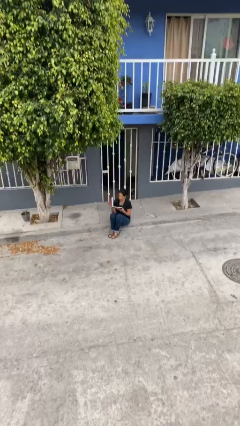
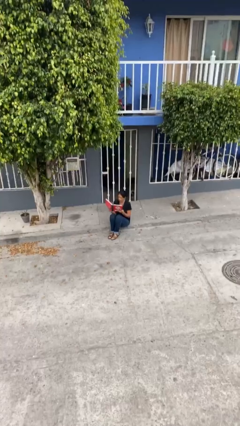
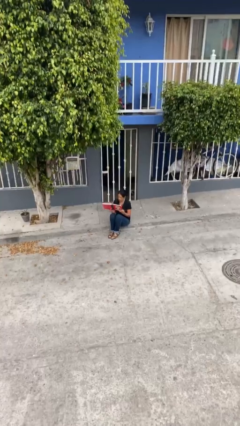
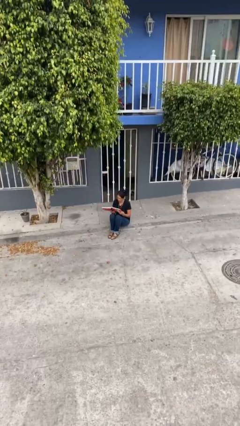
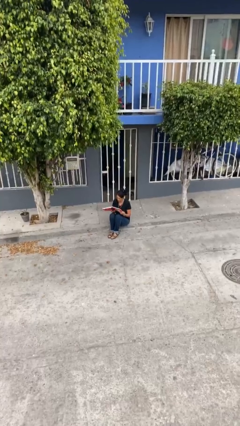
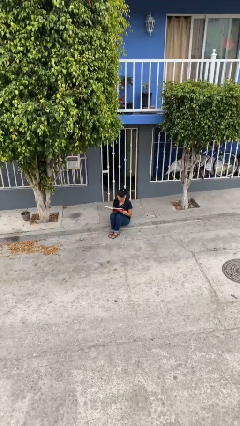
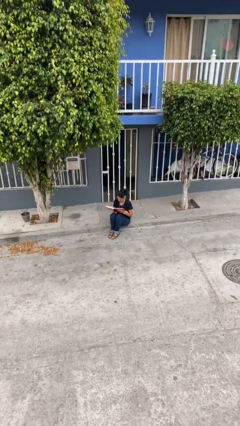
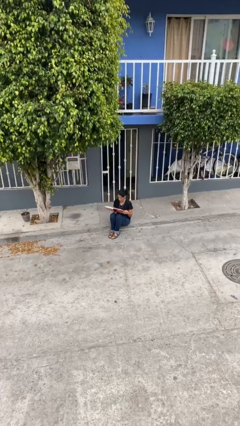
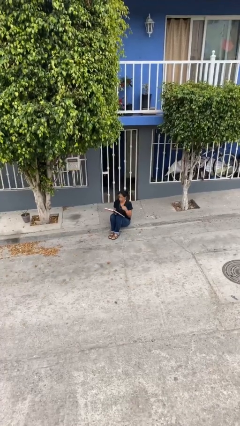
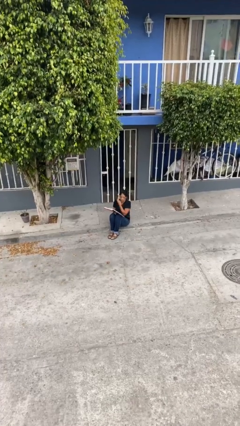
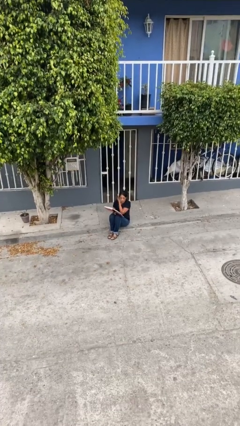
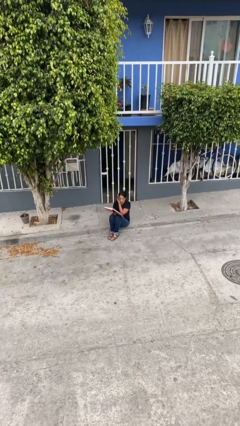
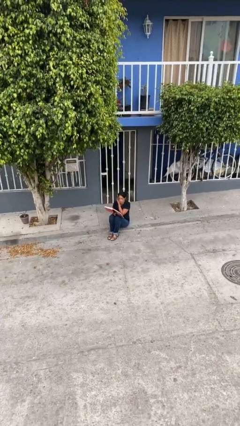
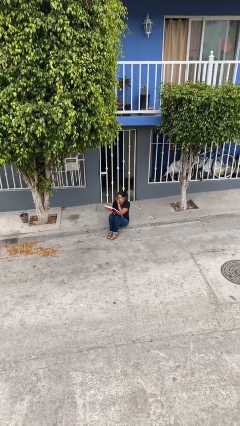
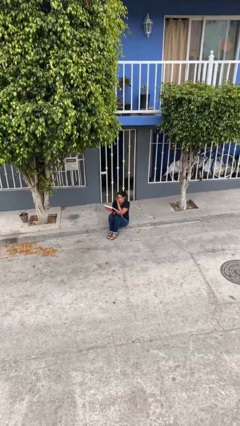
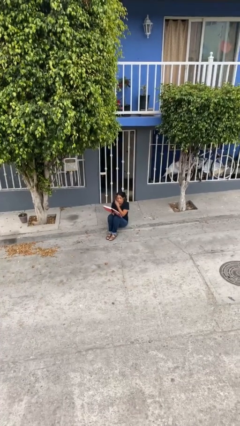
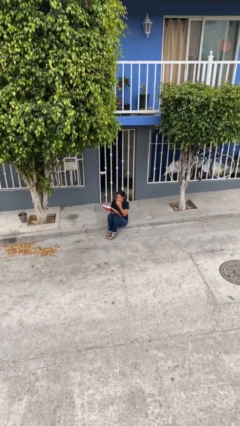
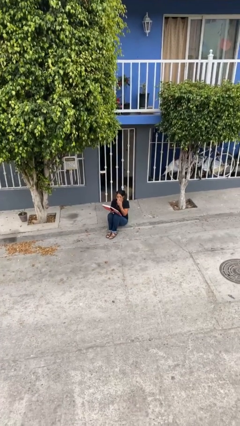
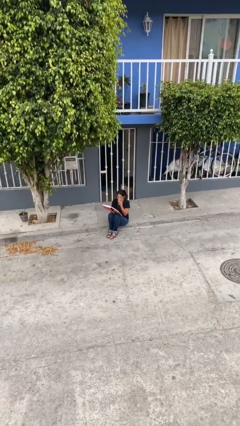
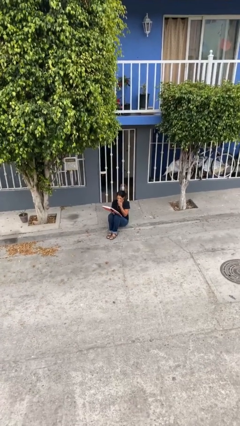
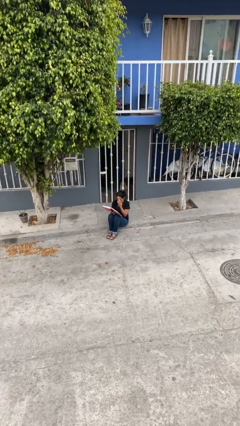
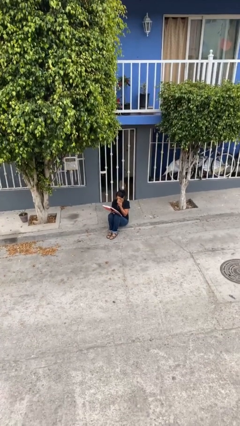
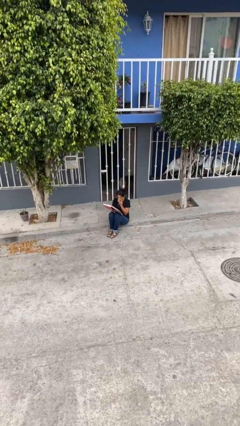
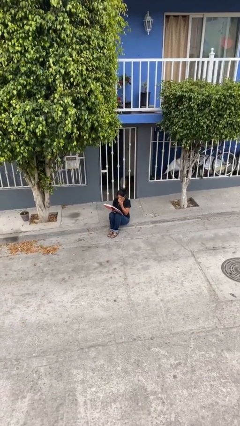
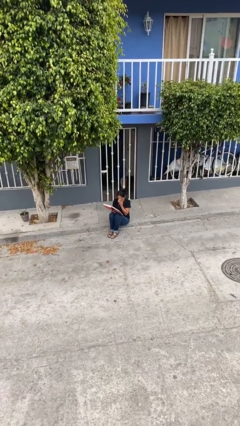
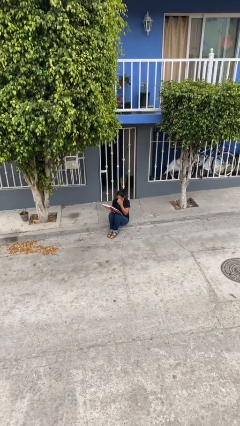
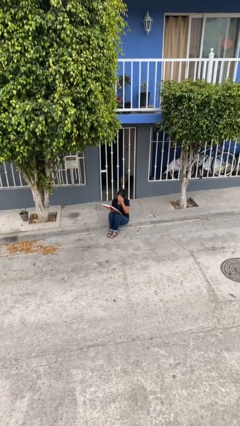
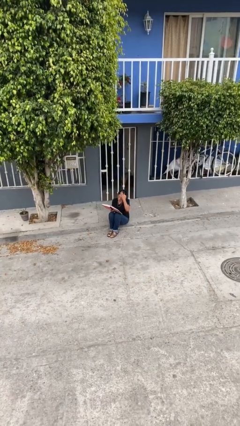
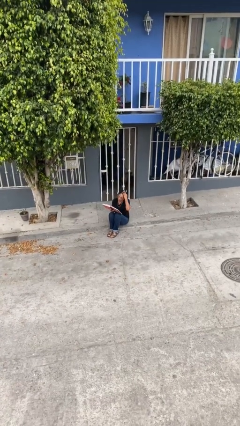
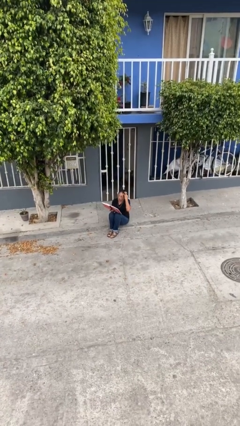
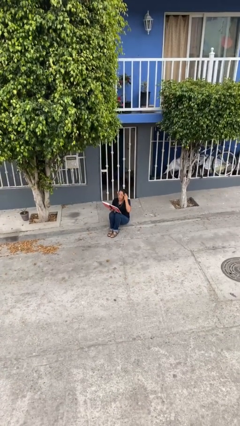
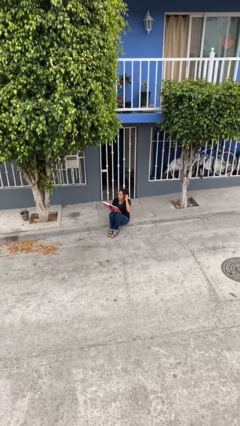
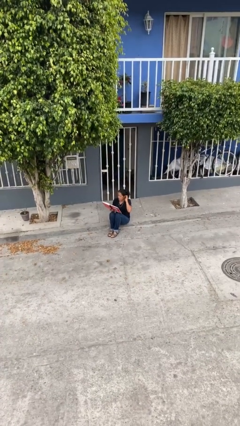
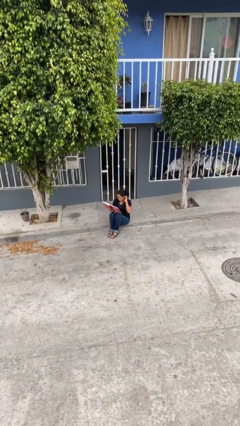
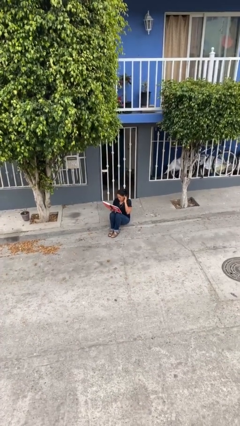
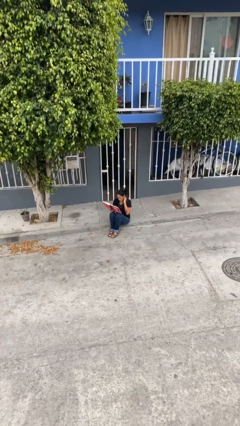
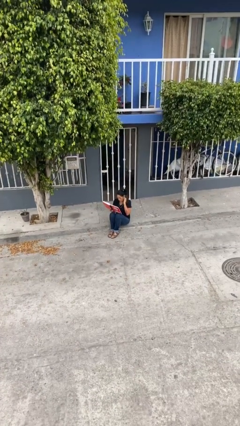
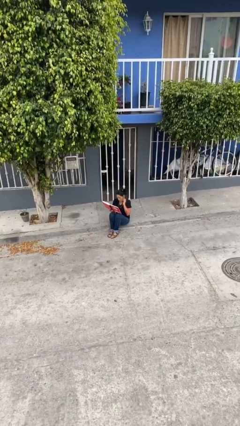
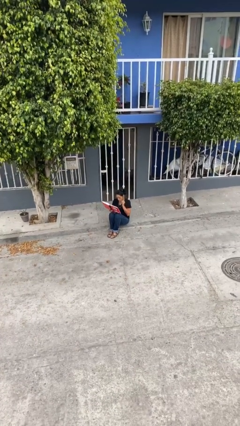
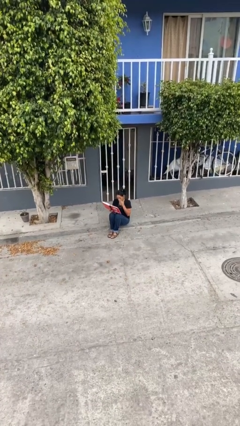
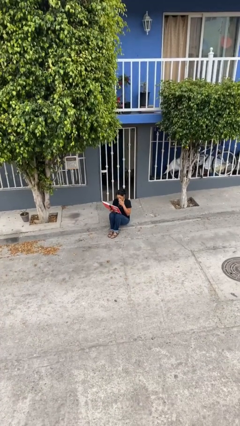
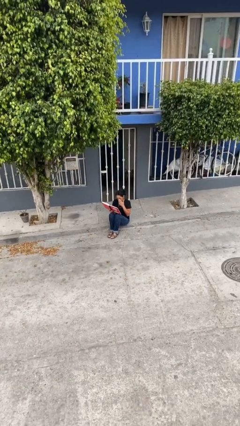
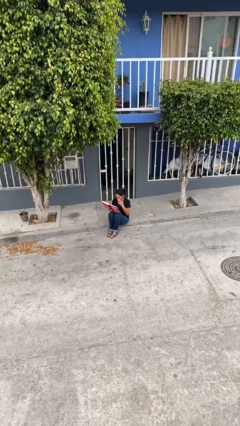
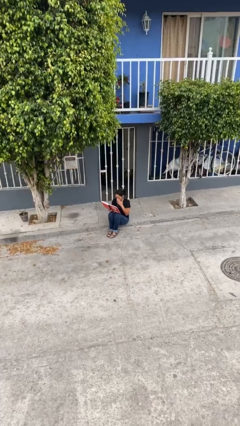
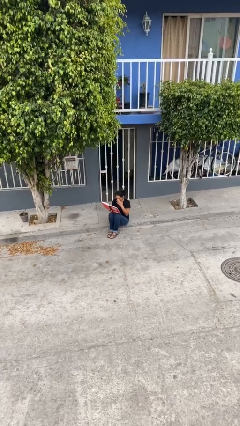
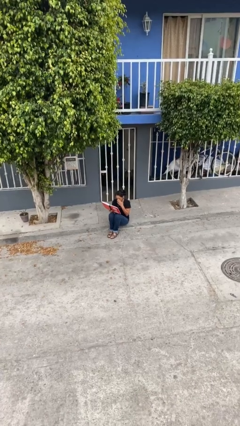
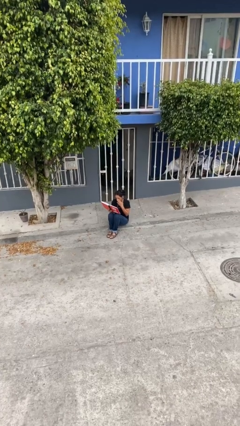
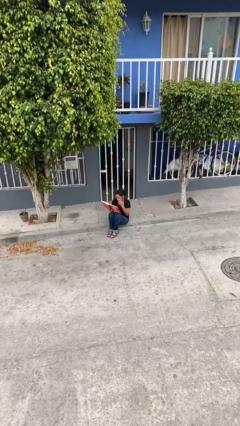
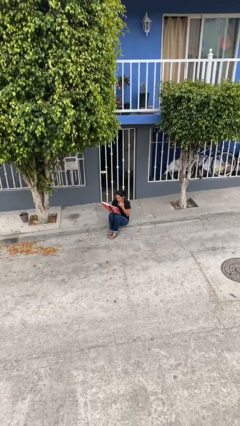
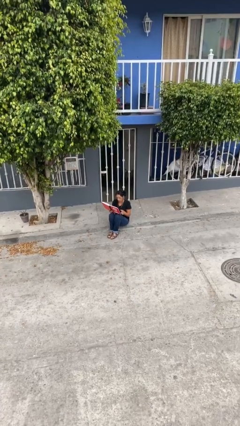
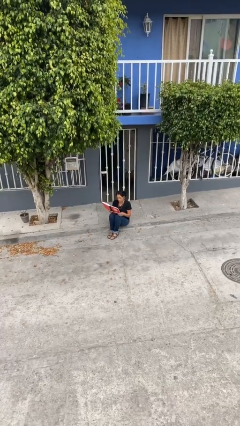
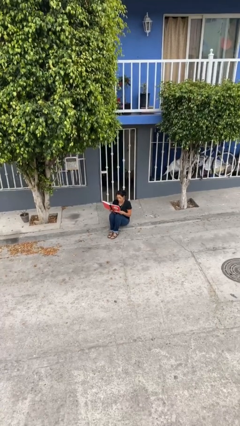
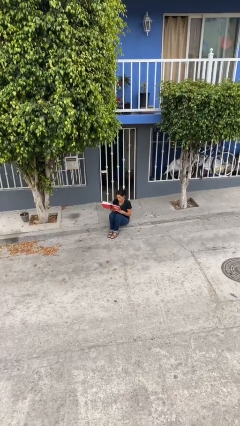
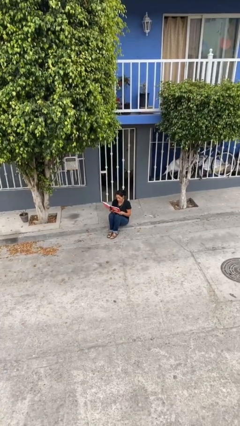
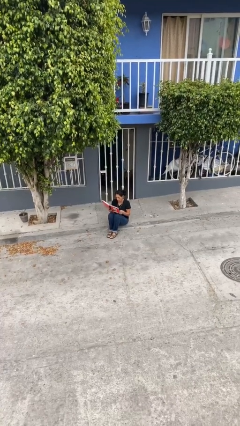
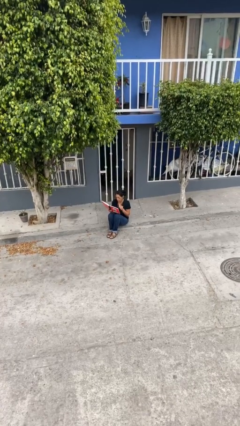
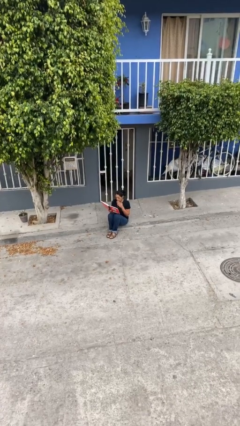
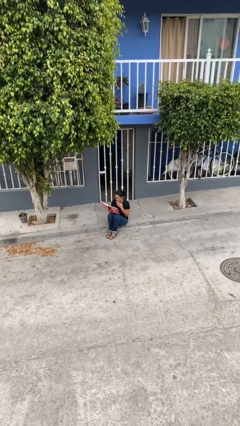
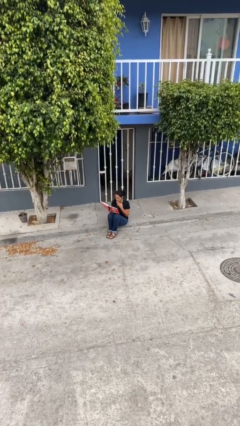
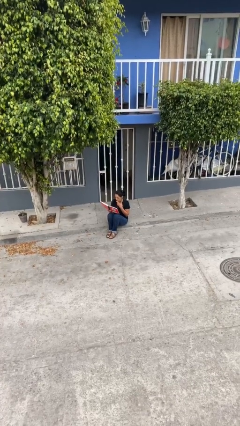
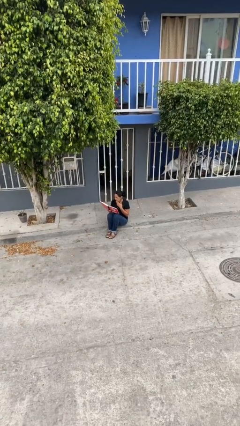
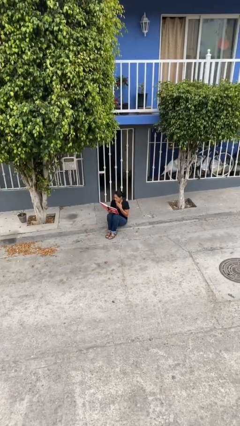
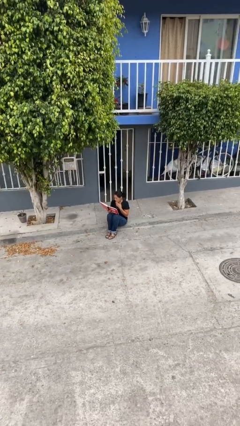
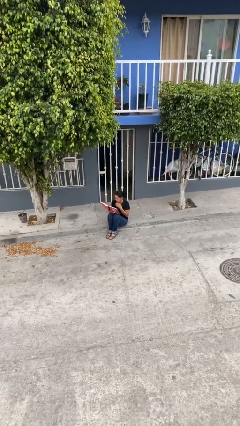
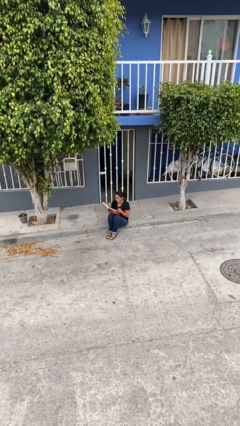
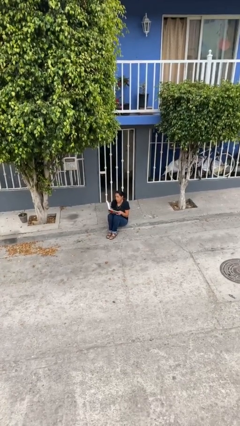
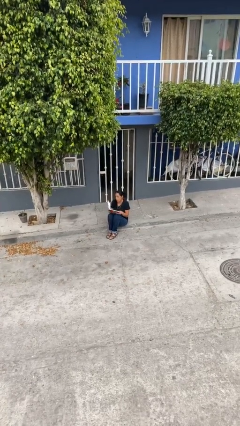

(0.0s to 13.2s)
person reads document

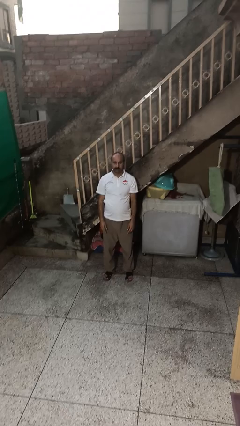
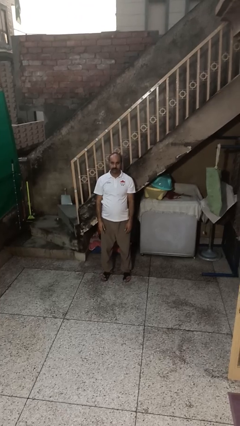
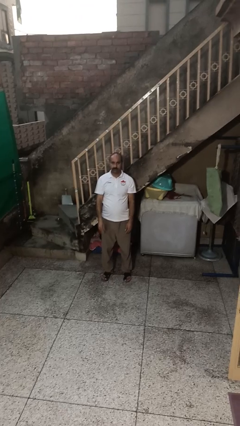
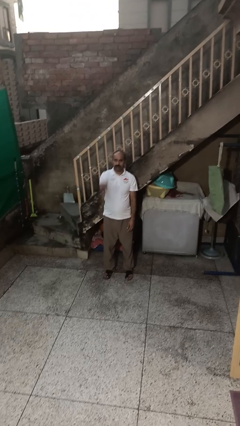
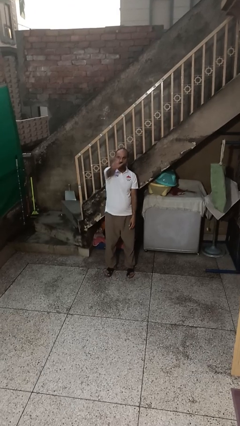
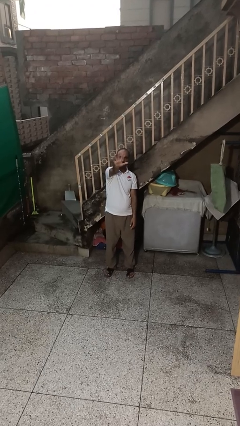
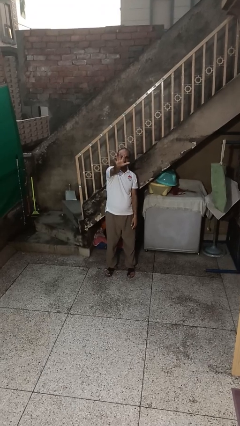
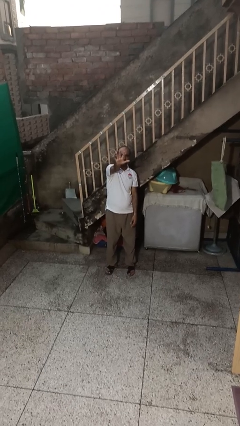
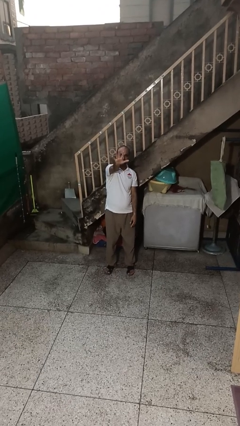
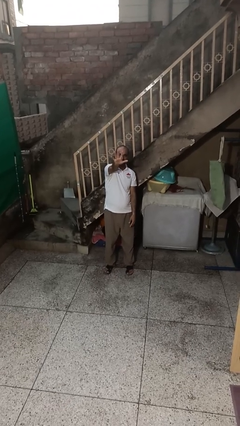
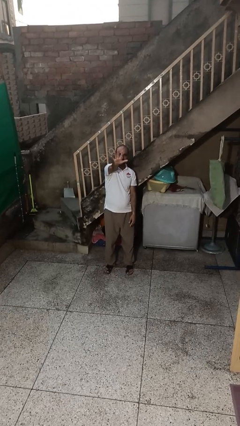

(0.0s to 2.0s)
person gestures number five

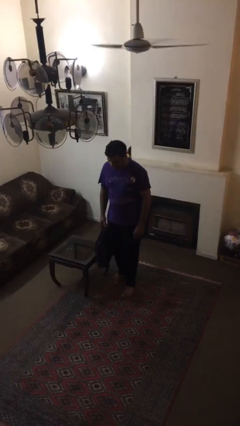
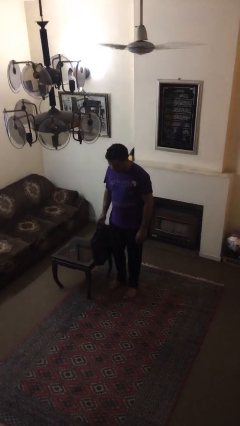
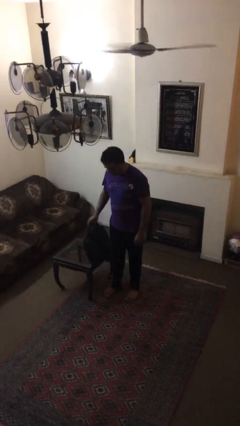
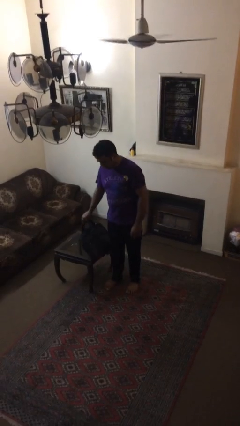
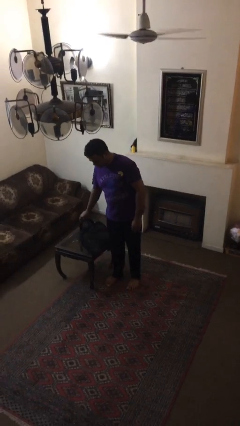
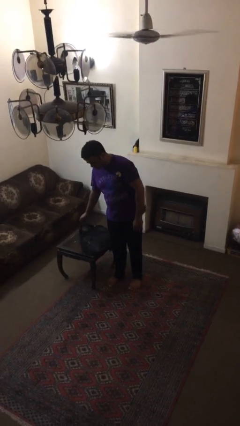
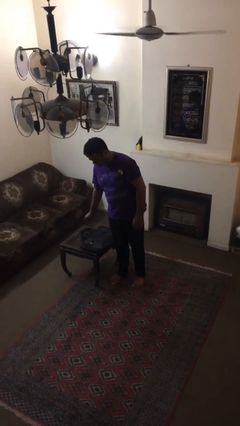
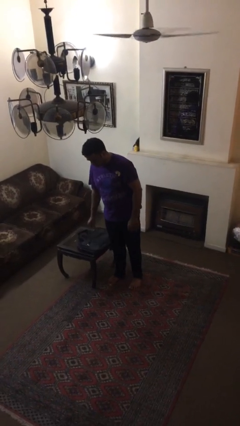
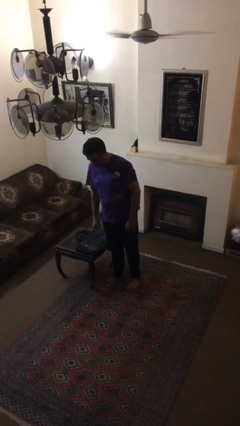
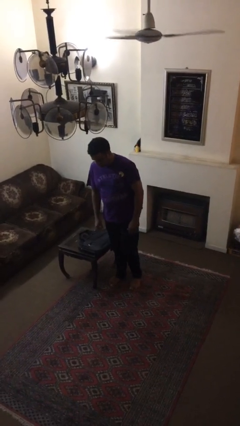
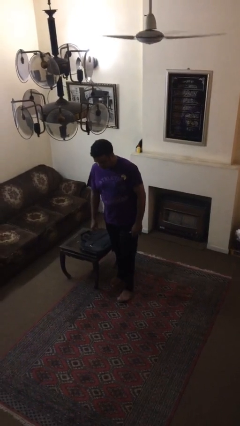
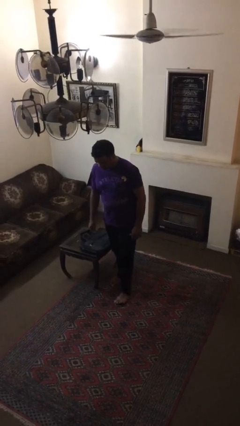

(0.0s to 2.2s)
person puts down object on table

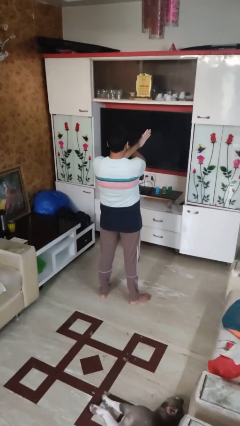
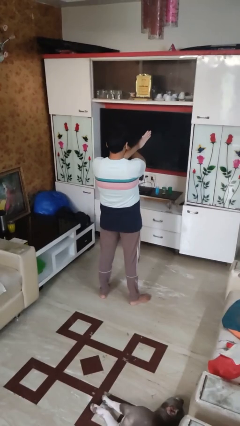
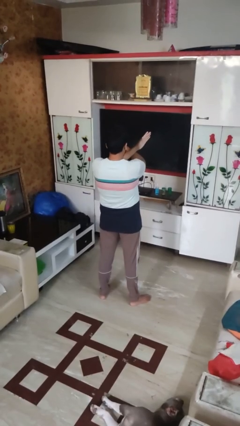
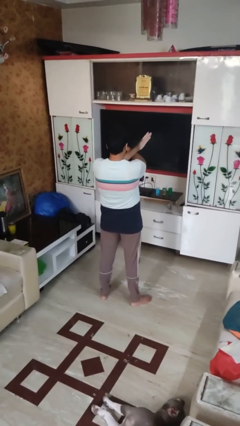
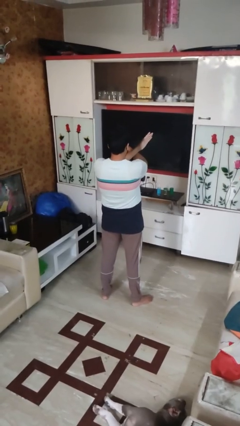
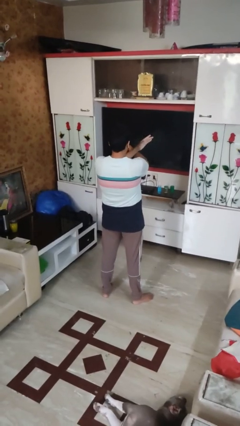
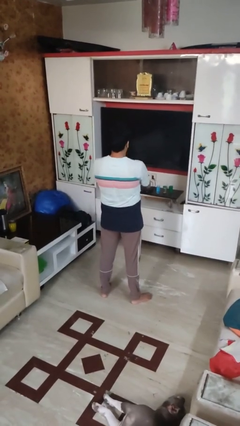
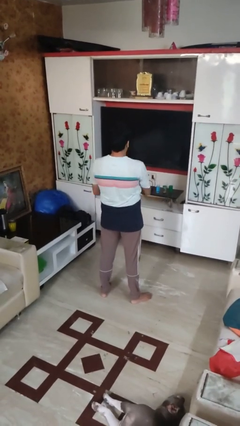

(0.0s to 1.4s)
person gestures arms x
